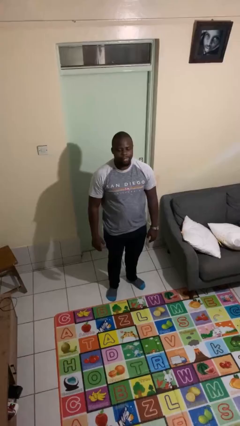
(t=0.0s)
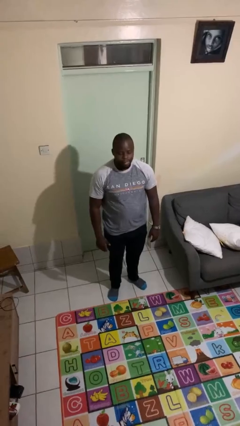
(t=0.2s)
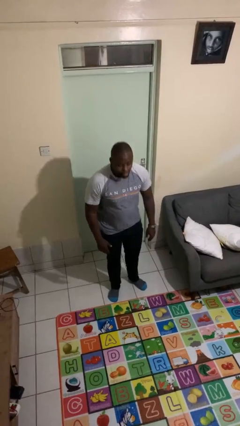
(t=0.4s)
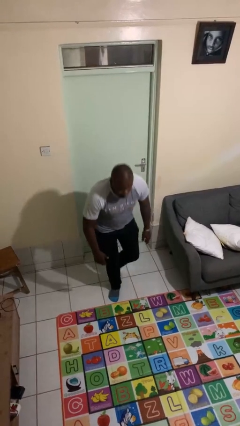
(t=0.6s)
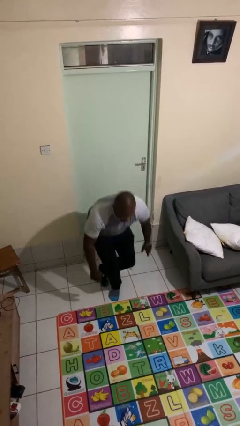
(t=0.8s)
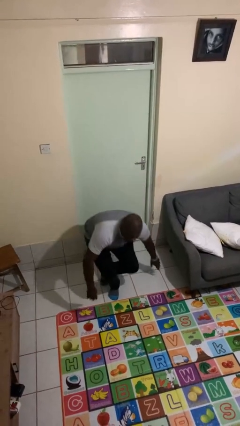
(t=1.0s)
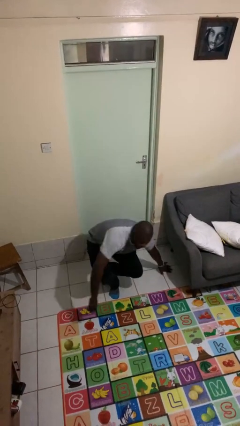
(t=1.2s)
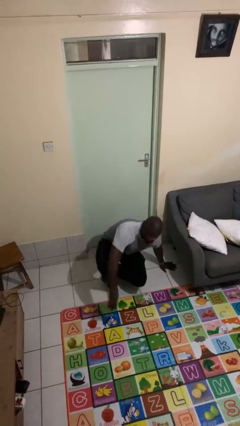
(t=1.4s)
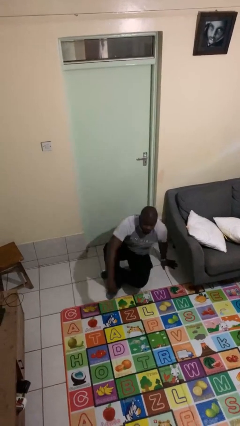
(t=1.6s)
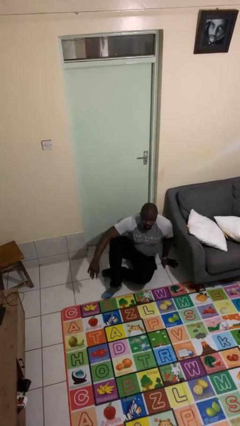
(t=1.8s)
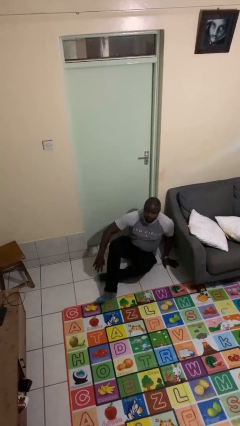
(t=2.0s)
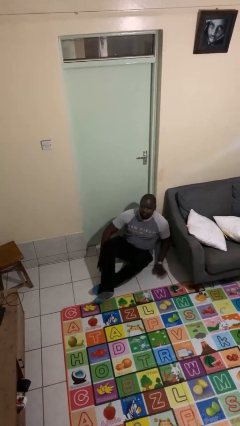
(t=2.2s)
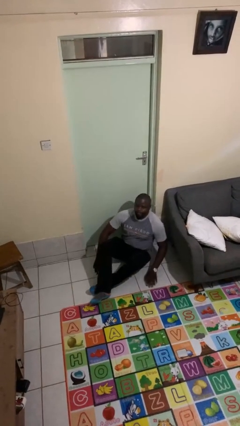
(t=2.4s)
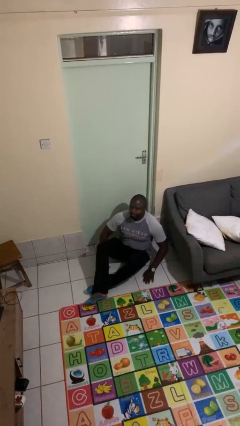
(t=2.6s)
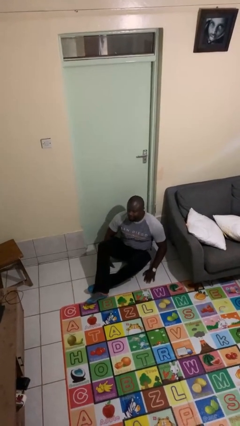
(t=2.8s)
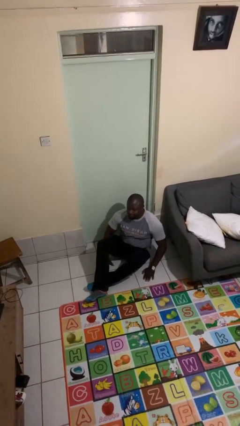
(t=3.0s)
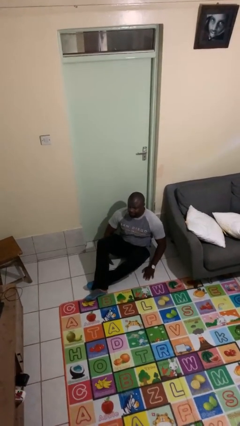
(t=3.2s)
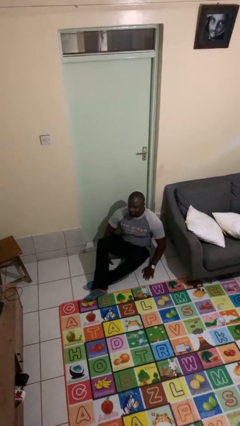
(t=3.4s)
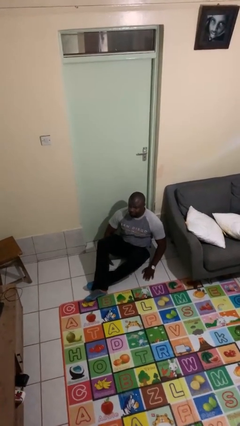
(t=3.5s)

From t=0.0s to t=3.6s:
person sits crisscross

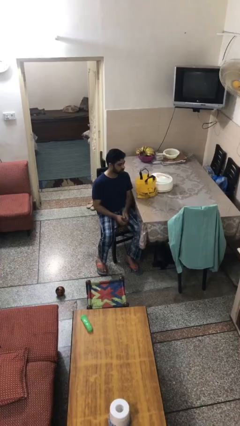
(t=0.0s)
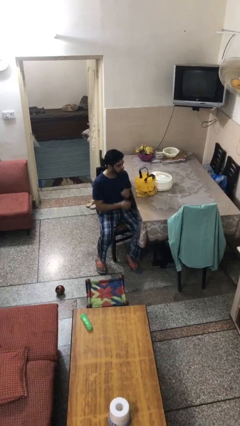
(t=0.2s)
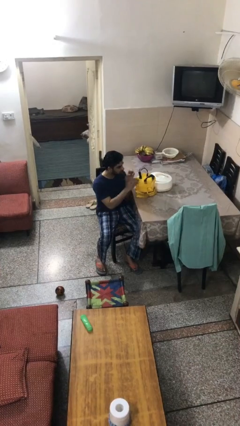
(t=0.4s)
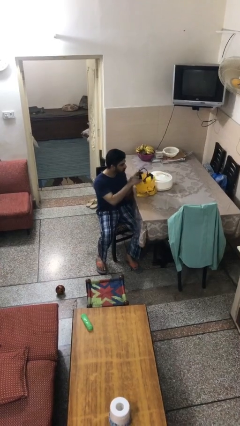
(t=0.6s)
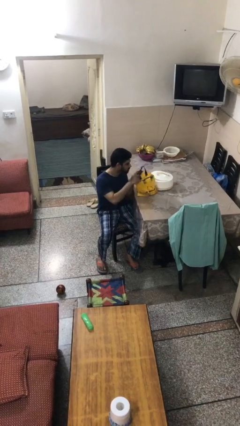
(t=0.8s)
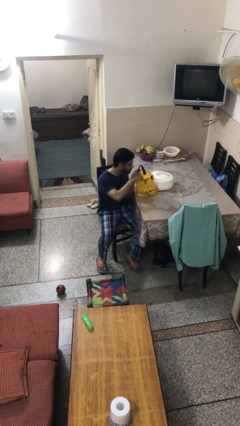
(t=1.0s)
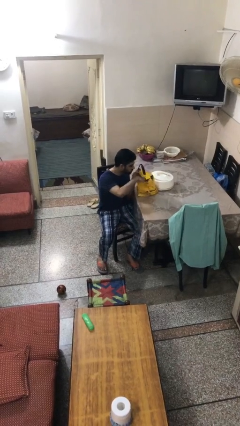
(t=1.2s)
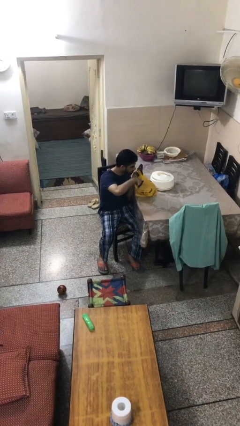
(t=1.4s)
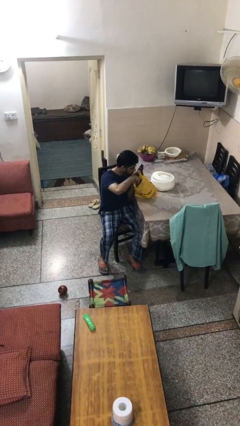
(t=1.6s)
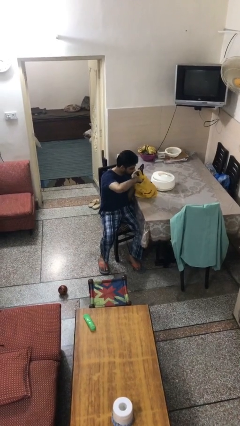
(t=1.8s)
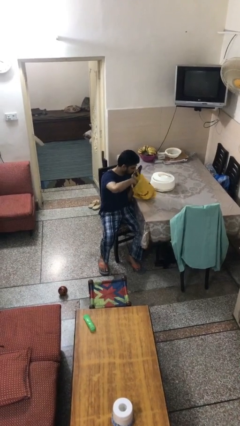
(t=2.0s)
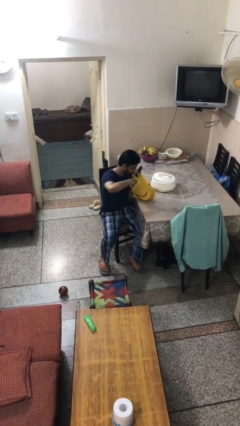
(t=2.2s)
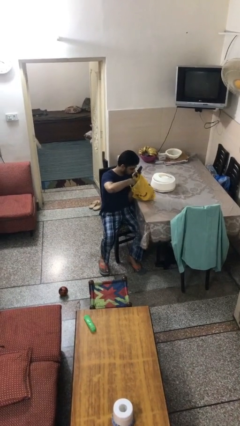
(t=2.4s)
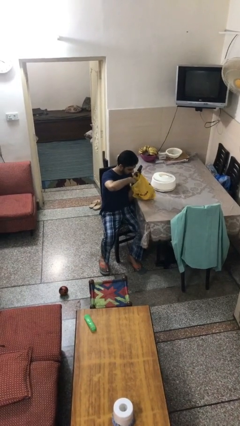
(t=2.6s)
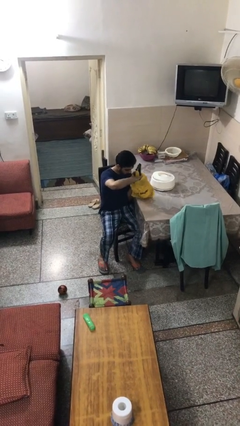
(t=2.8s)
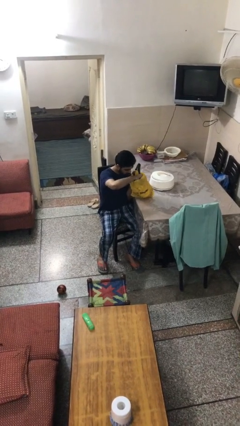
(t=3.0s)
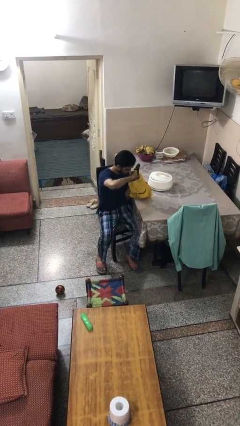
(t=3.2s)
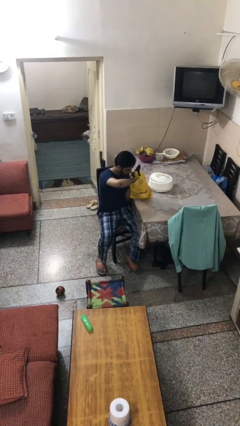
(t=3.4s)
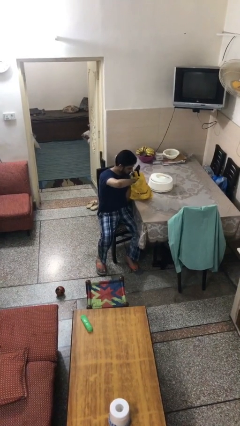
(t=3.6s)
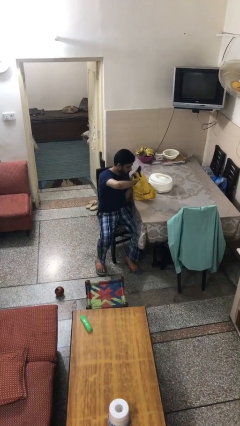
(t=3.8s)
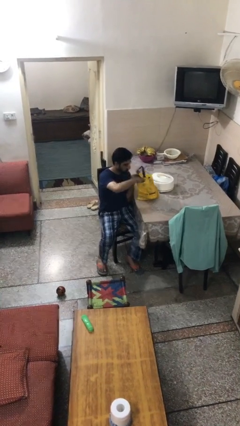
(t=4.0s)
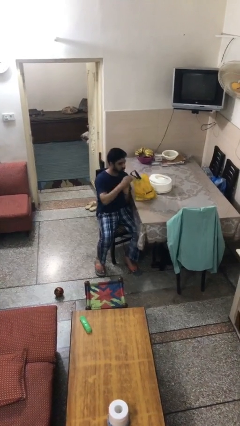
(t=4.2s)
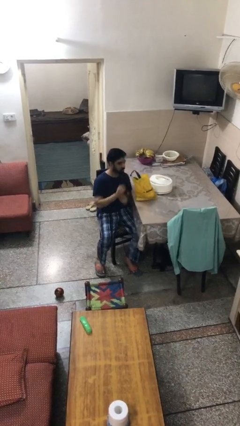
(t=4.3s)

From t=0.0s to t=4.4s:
person searches in bag

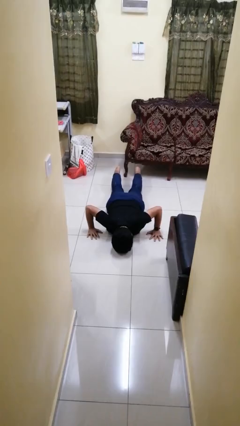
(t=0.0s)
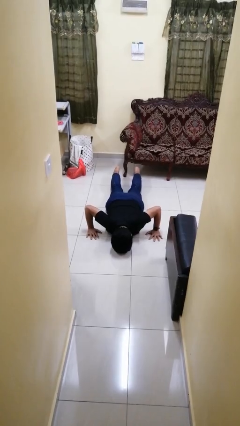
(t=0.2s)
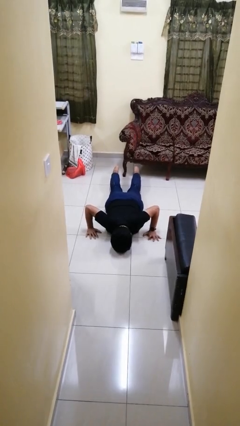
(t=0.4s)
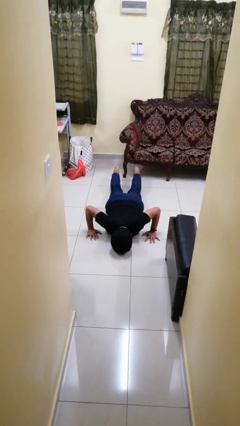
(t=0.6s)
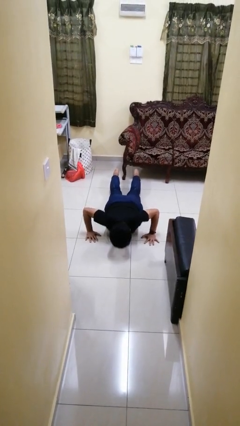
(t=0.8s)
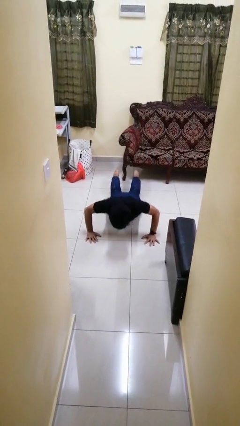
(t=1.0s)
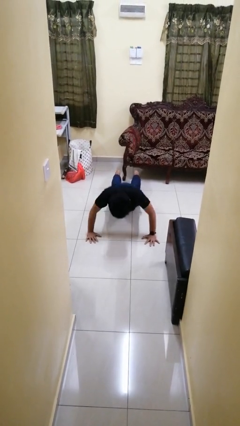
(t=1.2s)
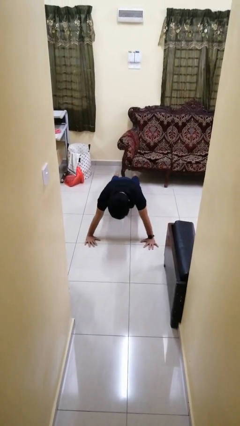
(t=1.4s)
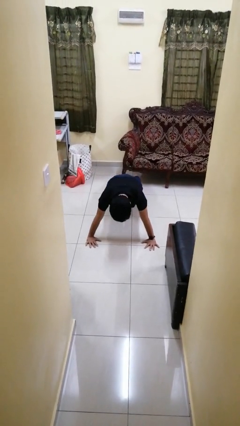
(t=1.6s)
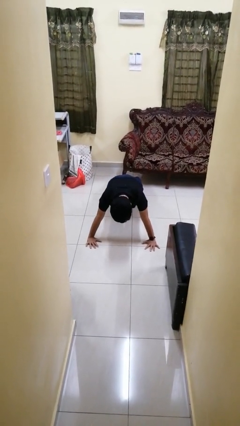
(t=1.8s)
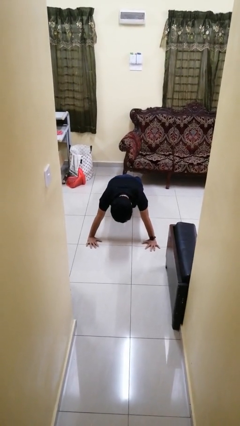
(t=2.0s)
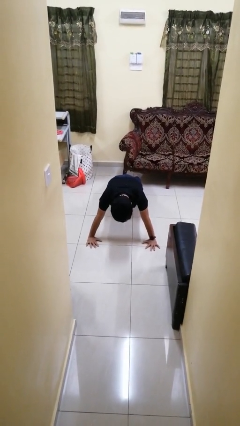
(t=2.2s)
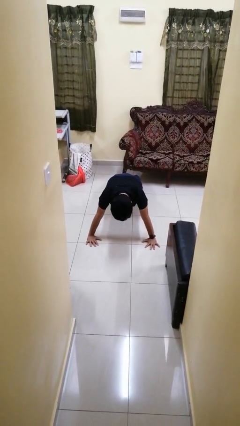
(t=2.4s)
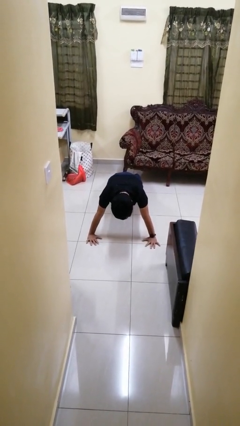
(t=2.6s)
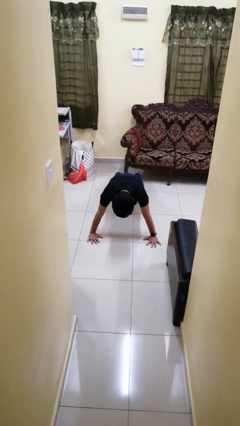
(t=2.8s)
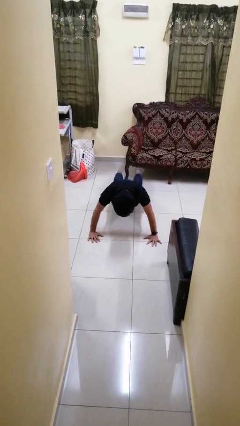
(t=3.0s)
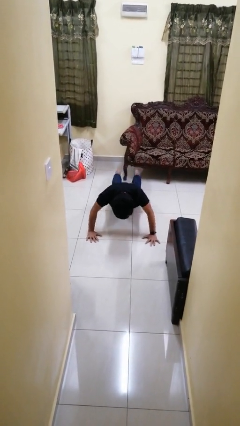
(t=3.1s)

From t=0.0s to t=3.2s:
person exercises with pushup

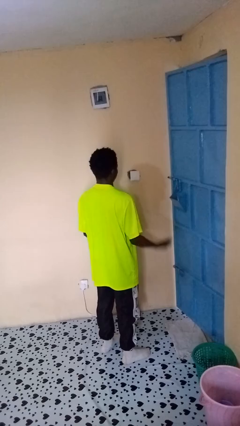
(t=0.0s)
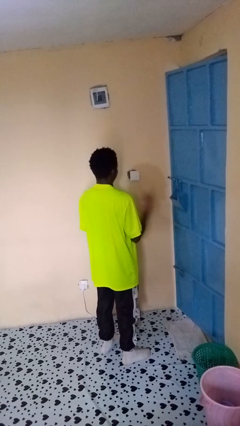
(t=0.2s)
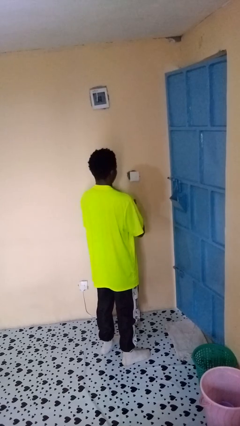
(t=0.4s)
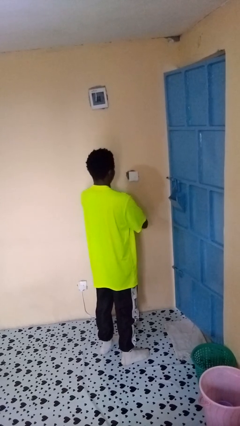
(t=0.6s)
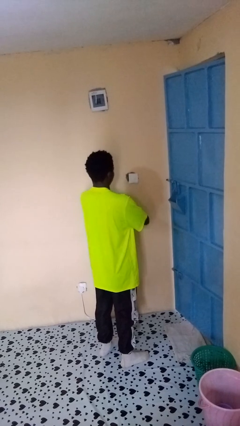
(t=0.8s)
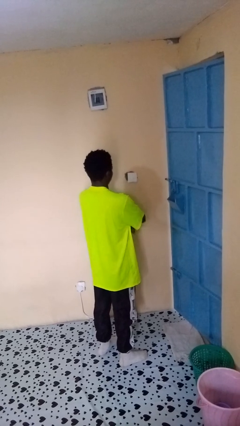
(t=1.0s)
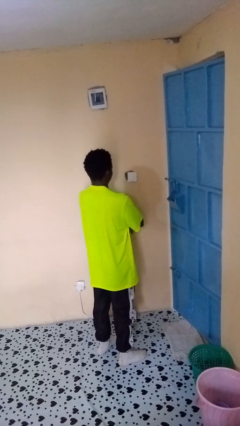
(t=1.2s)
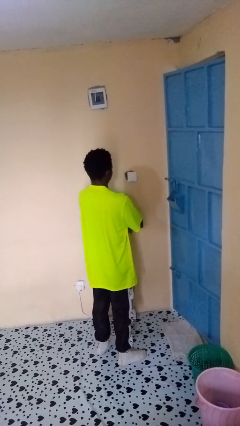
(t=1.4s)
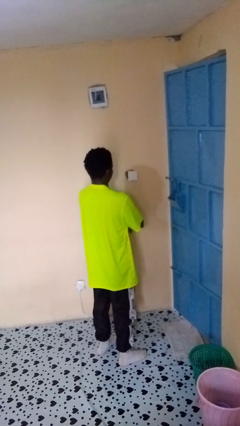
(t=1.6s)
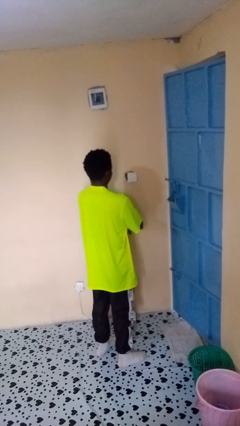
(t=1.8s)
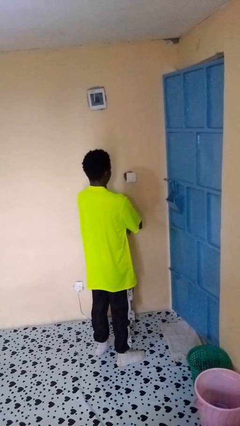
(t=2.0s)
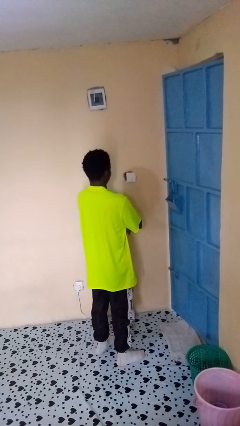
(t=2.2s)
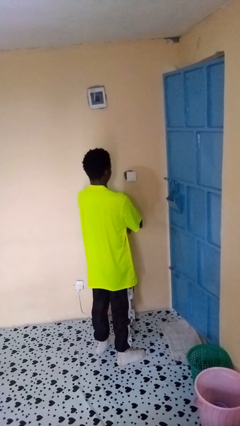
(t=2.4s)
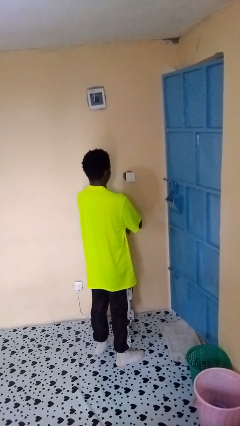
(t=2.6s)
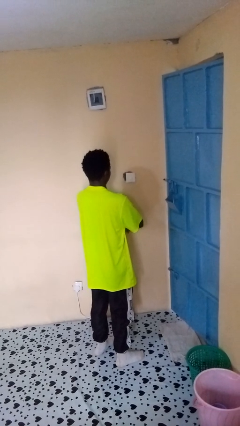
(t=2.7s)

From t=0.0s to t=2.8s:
person crosses arms

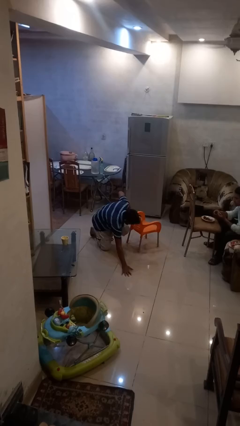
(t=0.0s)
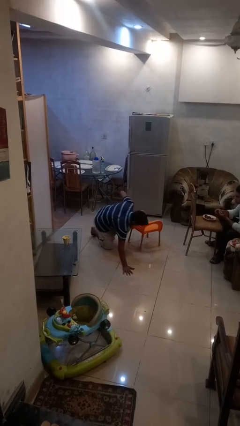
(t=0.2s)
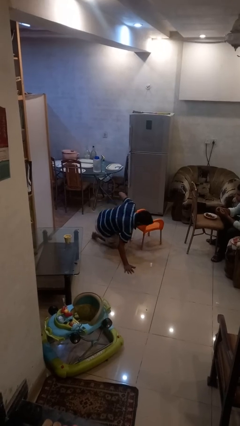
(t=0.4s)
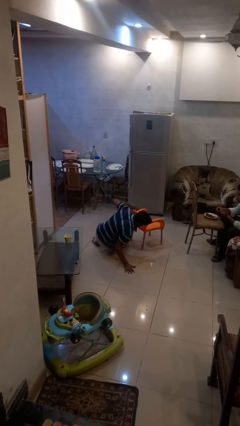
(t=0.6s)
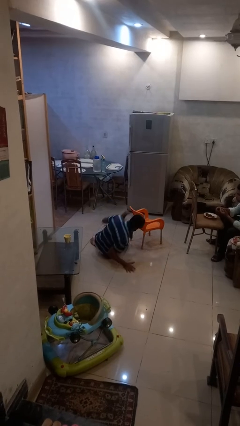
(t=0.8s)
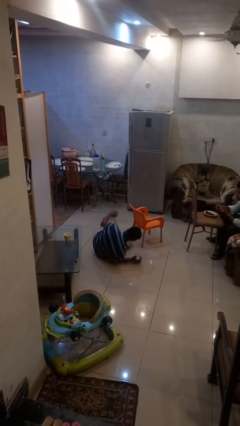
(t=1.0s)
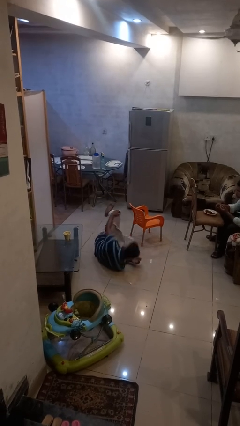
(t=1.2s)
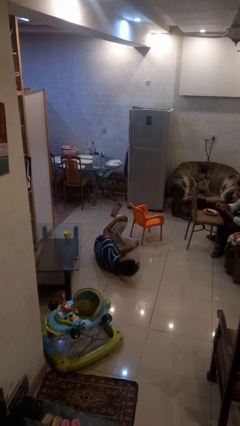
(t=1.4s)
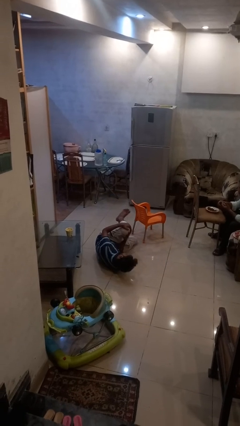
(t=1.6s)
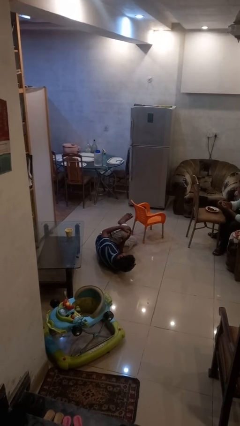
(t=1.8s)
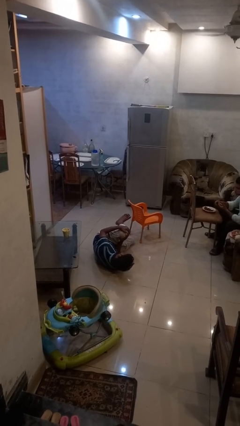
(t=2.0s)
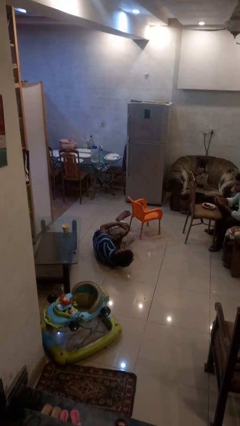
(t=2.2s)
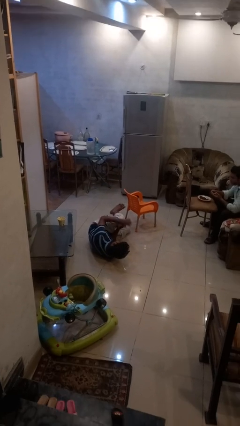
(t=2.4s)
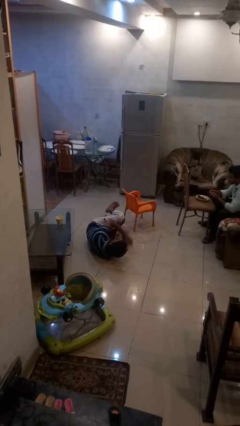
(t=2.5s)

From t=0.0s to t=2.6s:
person lies down on floor

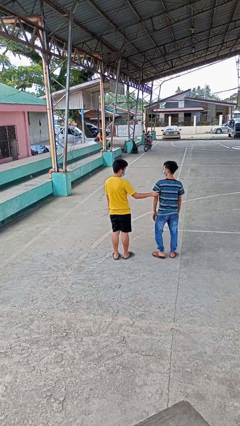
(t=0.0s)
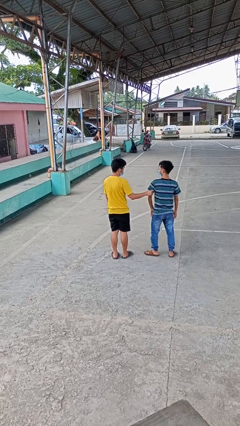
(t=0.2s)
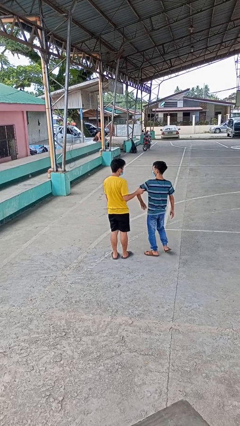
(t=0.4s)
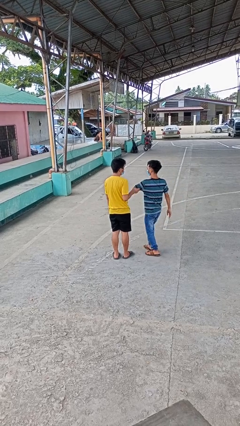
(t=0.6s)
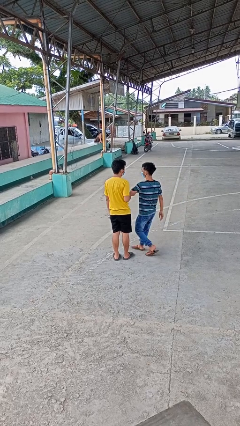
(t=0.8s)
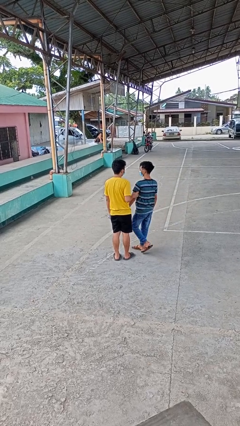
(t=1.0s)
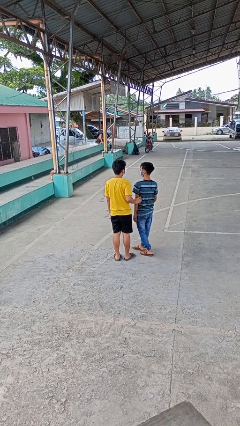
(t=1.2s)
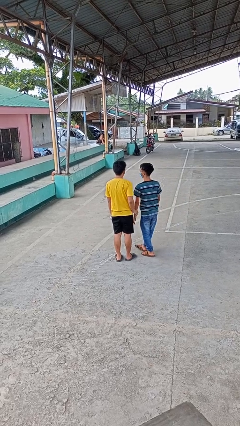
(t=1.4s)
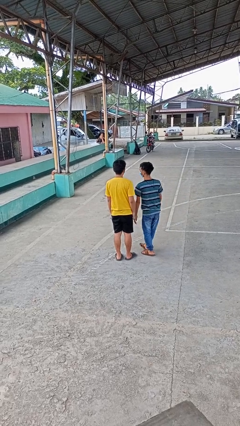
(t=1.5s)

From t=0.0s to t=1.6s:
person grabs person by bicep
